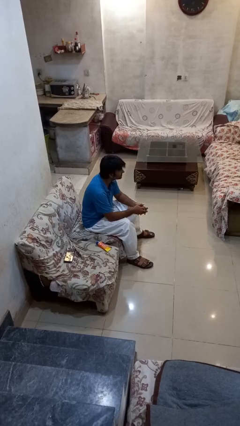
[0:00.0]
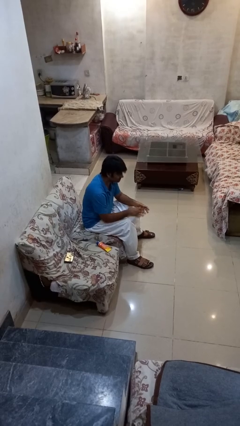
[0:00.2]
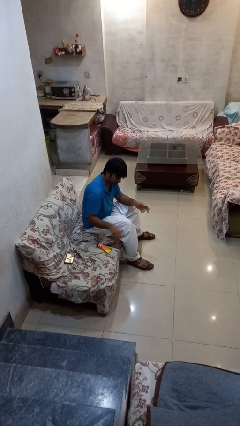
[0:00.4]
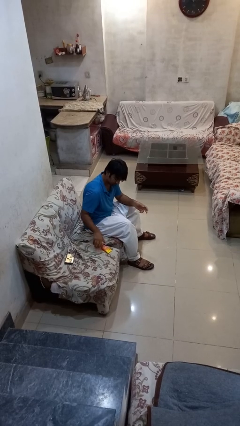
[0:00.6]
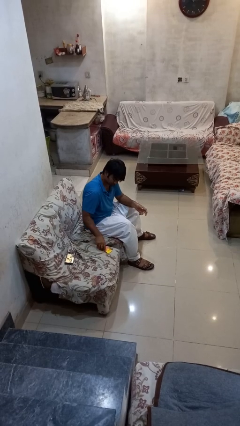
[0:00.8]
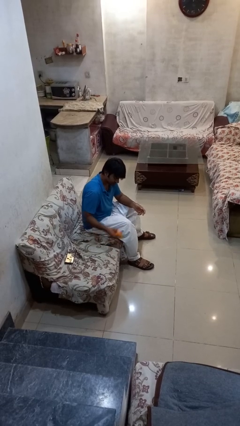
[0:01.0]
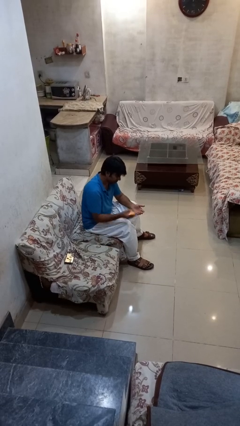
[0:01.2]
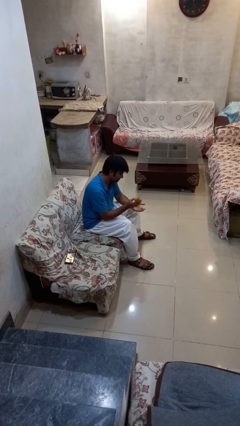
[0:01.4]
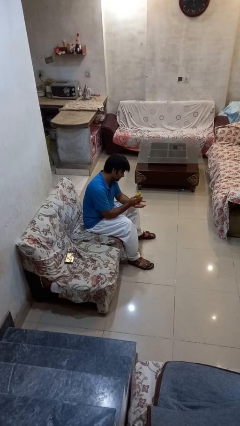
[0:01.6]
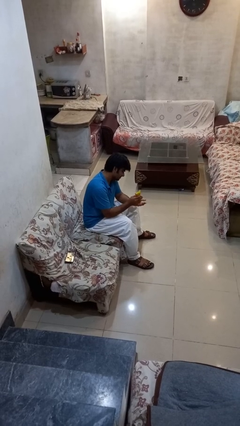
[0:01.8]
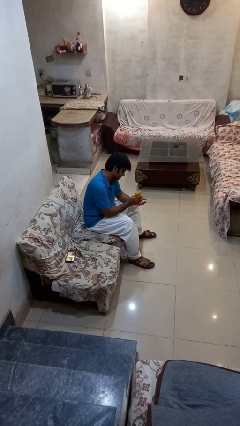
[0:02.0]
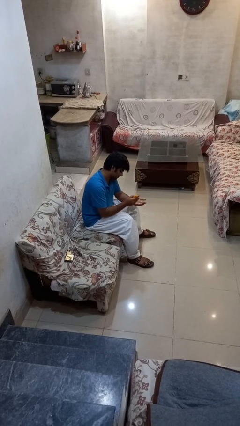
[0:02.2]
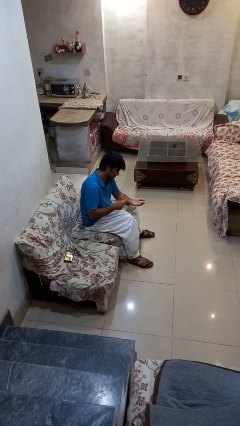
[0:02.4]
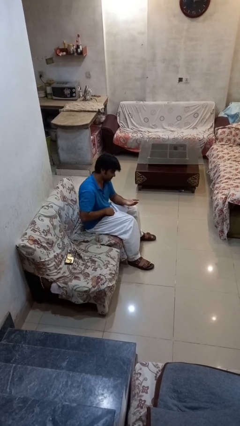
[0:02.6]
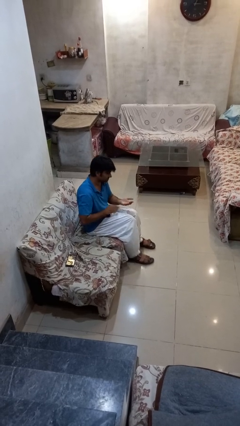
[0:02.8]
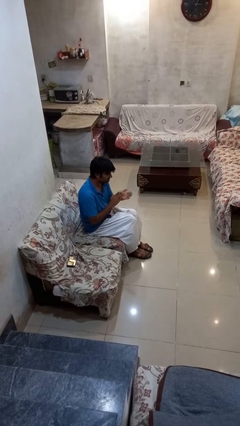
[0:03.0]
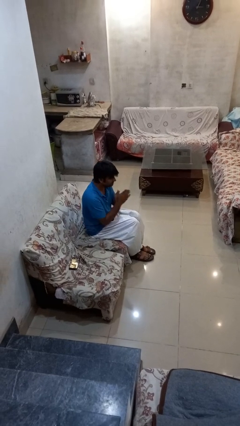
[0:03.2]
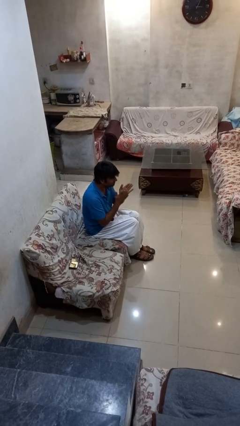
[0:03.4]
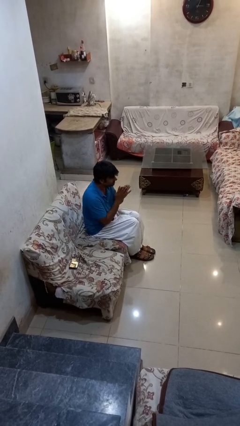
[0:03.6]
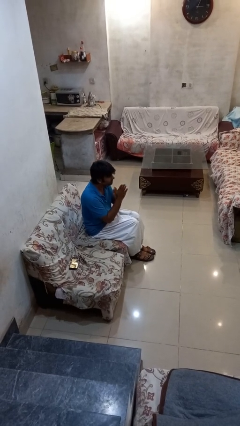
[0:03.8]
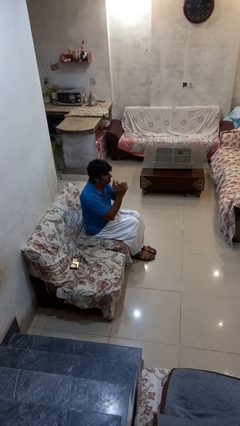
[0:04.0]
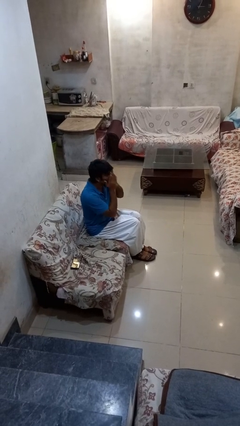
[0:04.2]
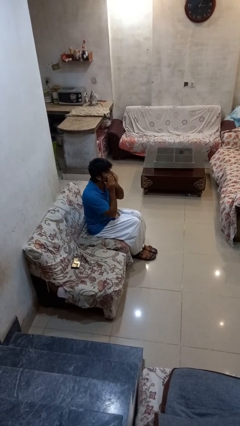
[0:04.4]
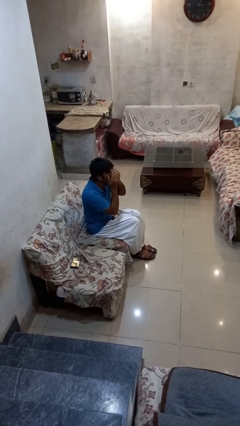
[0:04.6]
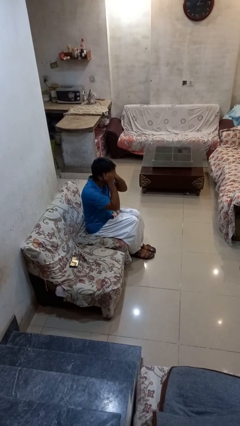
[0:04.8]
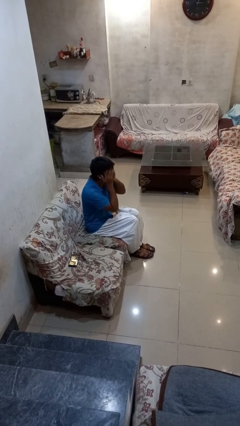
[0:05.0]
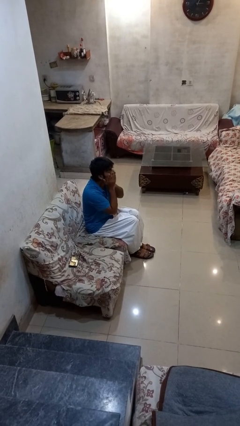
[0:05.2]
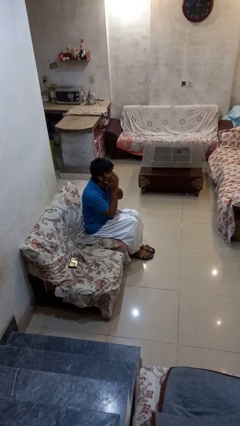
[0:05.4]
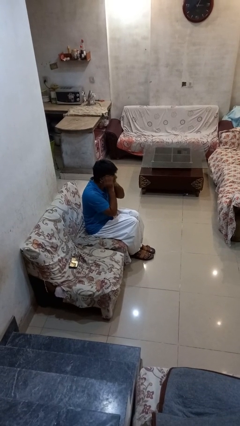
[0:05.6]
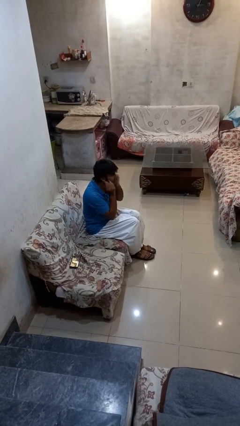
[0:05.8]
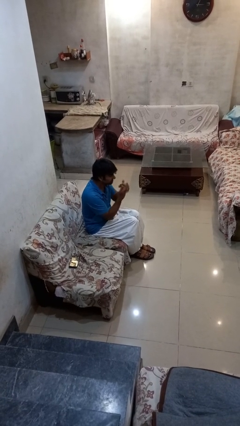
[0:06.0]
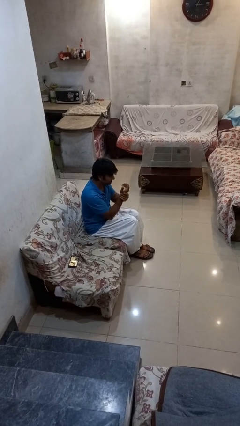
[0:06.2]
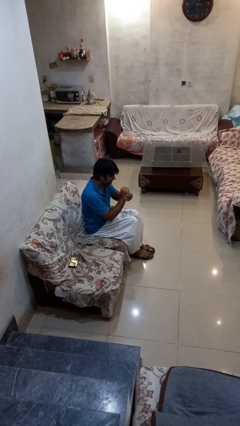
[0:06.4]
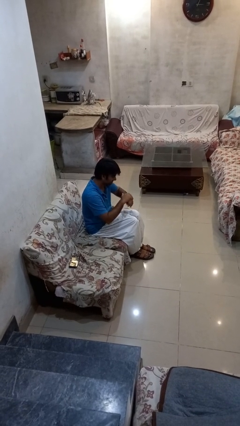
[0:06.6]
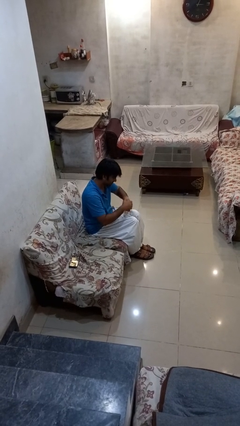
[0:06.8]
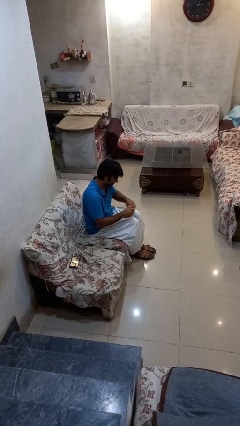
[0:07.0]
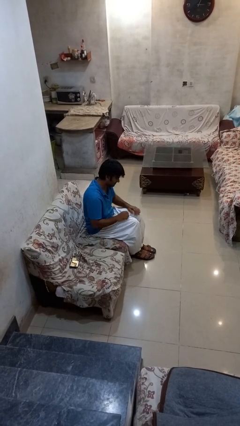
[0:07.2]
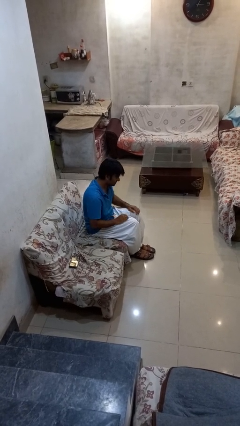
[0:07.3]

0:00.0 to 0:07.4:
person applies facial moisturizer

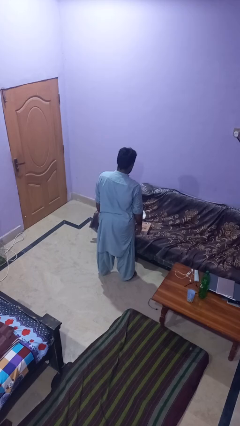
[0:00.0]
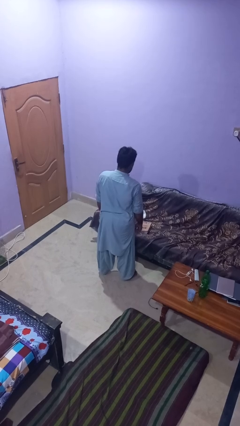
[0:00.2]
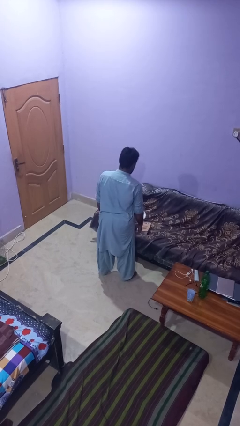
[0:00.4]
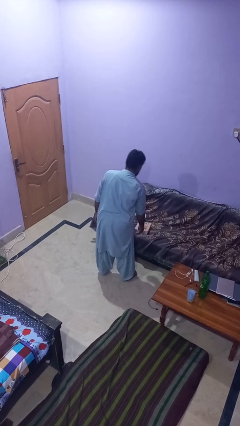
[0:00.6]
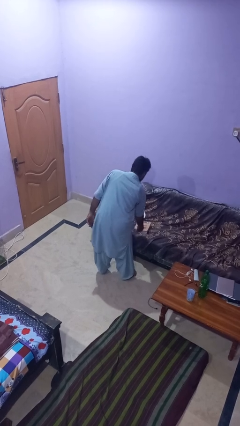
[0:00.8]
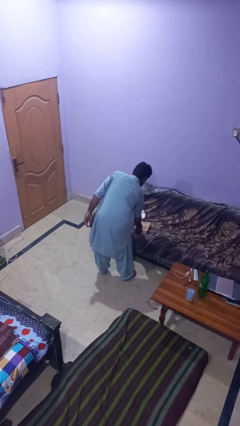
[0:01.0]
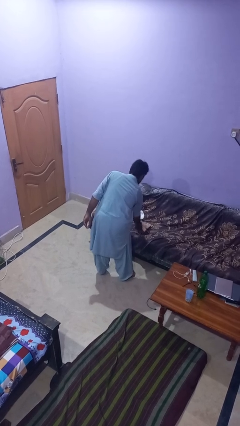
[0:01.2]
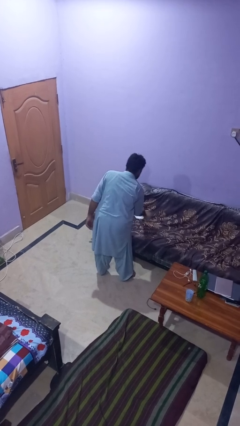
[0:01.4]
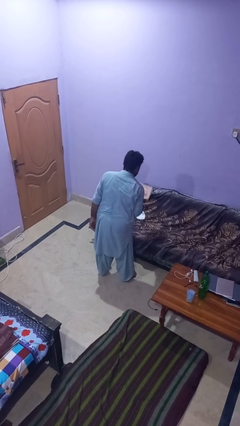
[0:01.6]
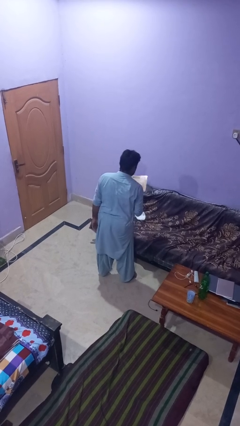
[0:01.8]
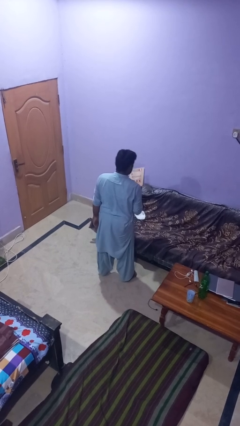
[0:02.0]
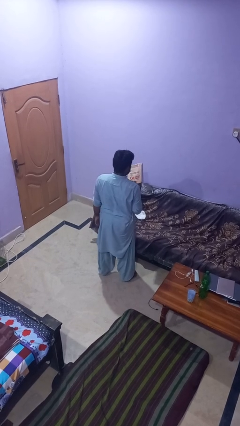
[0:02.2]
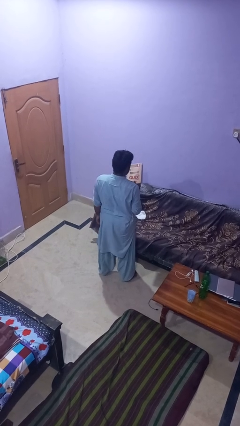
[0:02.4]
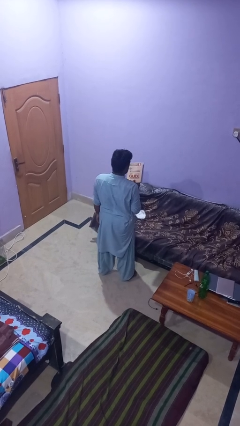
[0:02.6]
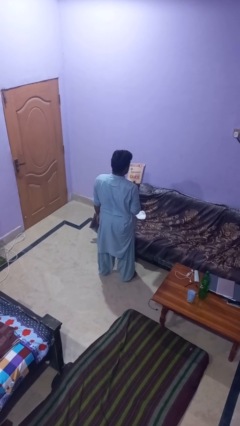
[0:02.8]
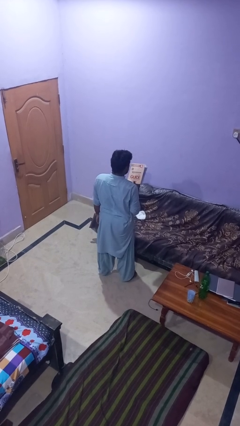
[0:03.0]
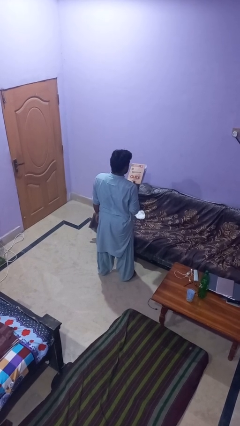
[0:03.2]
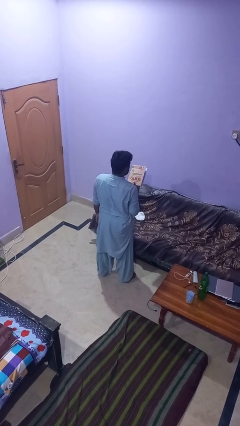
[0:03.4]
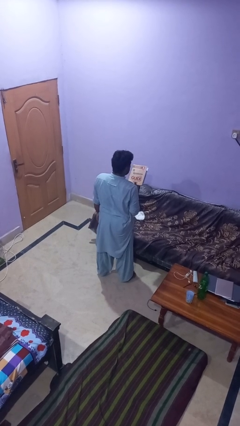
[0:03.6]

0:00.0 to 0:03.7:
person picks up object from couch

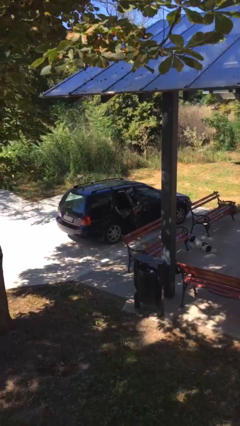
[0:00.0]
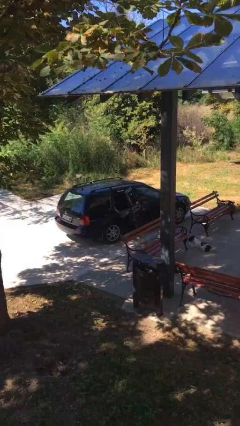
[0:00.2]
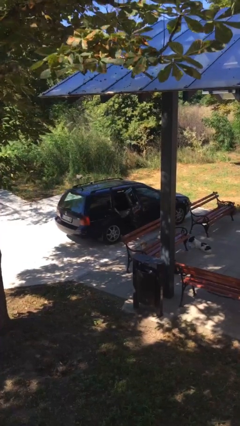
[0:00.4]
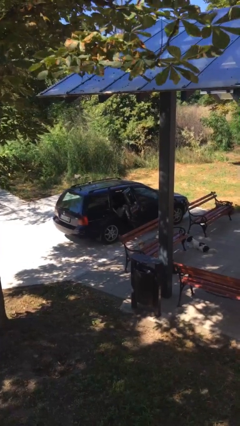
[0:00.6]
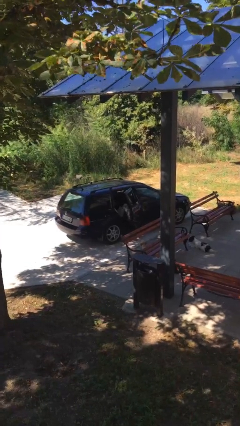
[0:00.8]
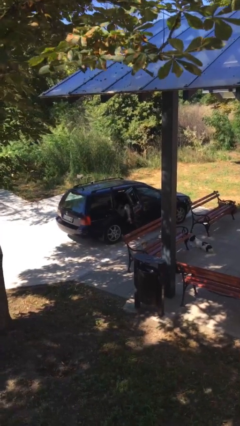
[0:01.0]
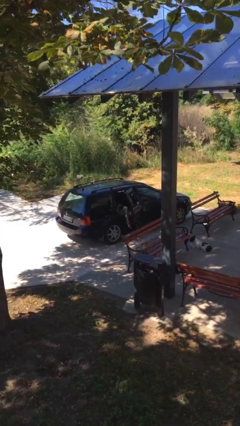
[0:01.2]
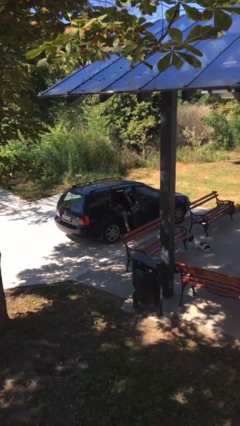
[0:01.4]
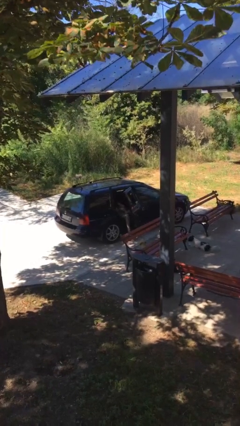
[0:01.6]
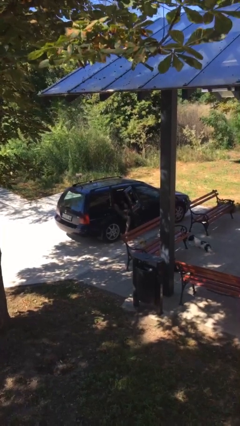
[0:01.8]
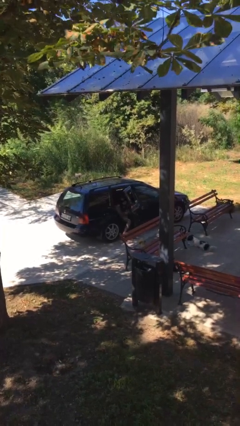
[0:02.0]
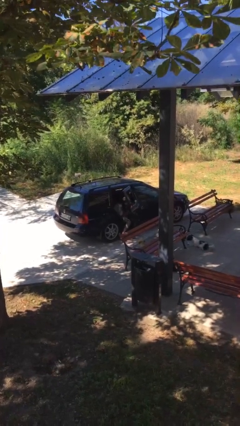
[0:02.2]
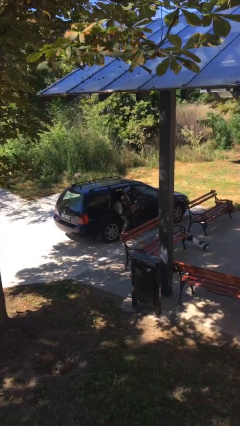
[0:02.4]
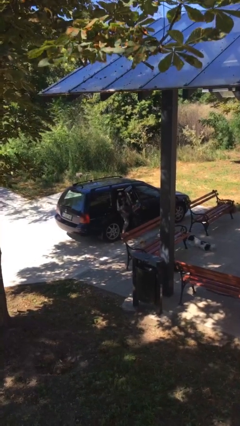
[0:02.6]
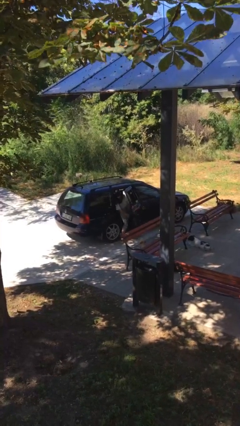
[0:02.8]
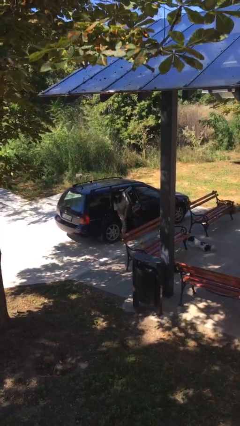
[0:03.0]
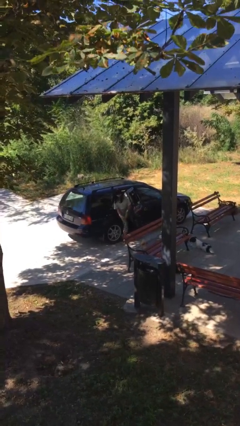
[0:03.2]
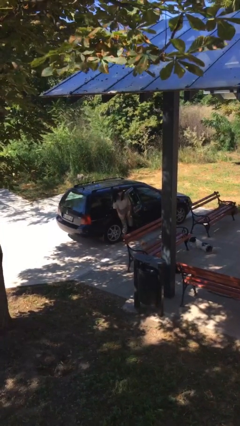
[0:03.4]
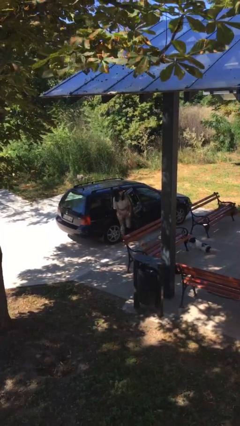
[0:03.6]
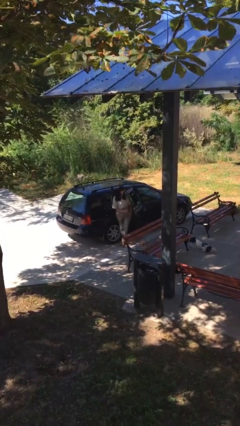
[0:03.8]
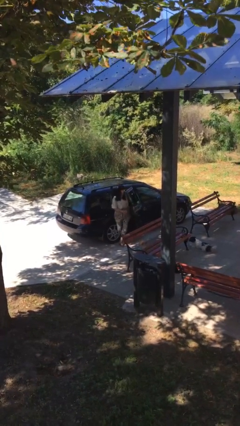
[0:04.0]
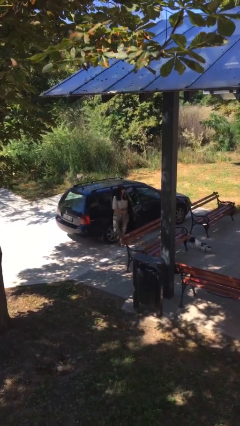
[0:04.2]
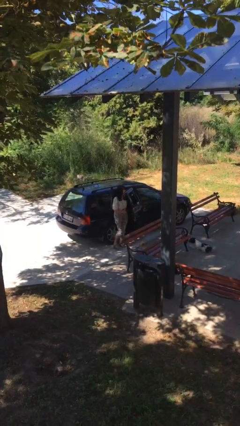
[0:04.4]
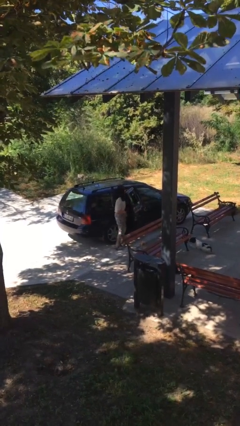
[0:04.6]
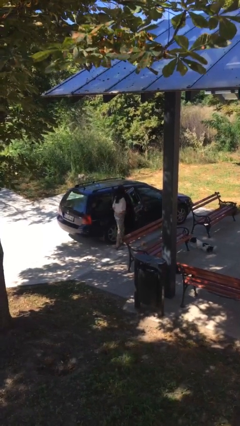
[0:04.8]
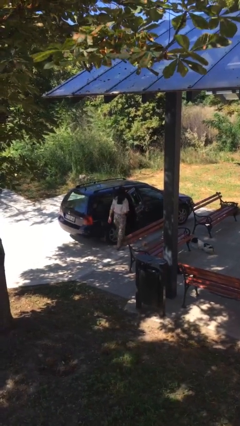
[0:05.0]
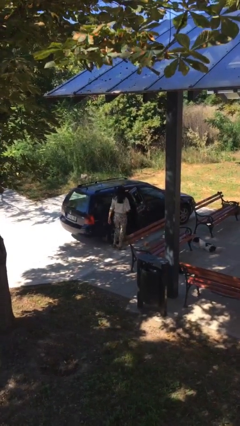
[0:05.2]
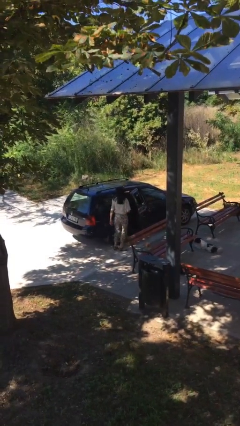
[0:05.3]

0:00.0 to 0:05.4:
person exits car

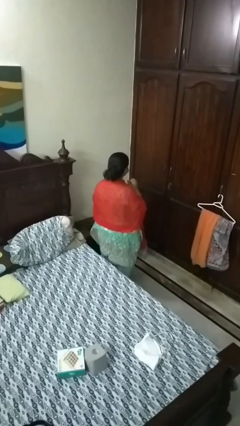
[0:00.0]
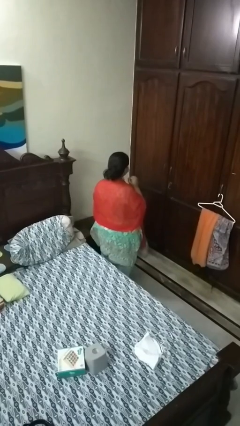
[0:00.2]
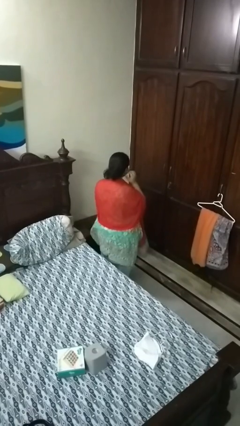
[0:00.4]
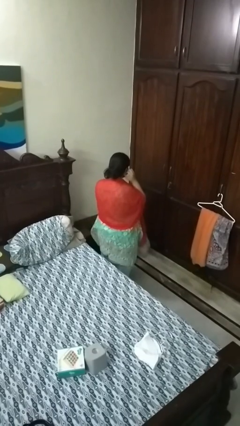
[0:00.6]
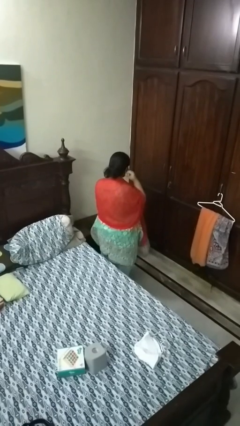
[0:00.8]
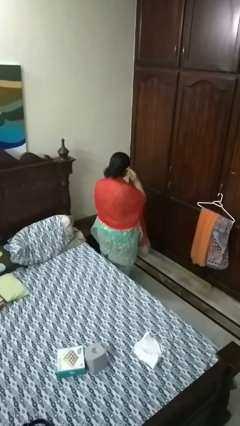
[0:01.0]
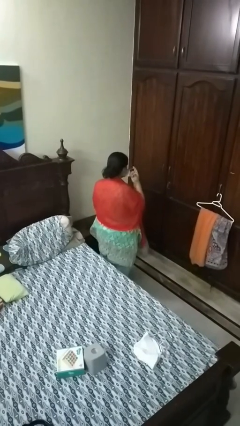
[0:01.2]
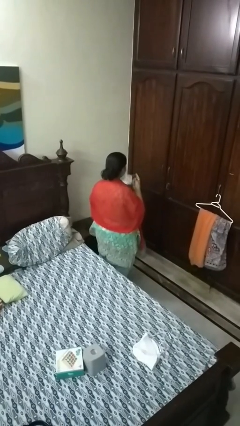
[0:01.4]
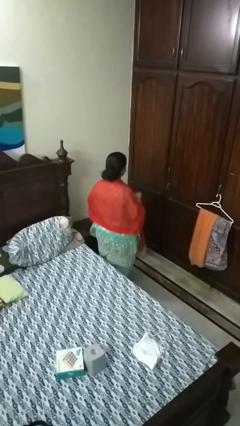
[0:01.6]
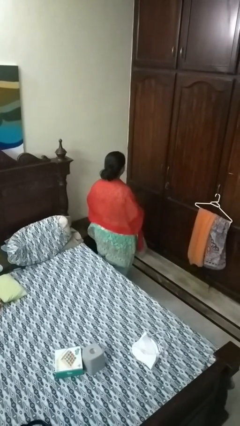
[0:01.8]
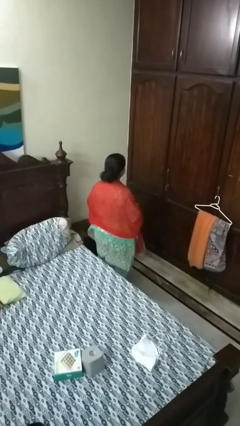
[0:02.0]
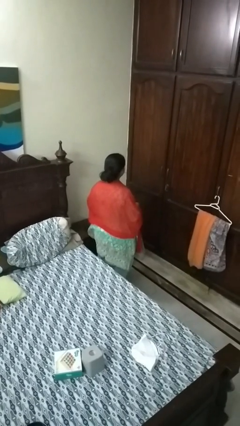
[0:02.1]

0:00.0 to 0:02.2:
person takes off facemask
